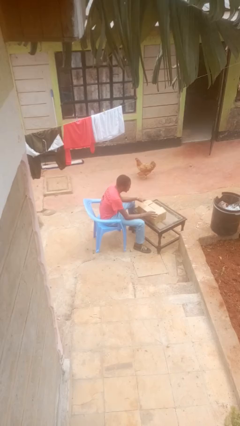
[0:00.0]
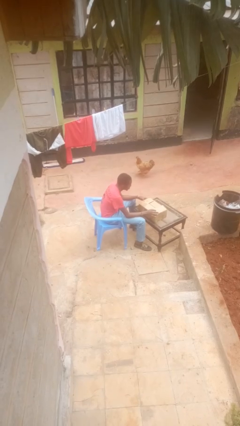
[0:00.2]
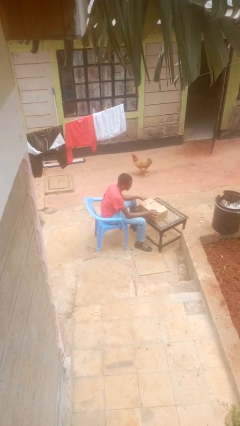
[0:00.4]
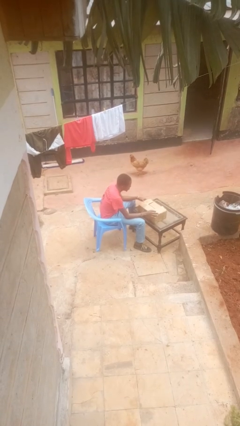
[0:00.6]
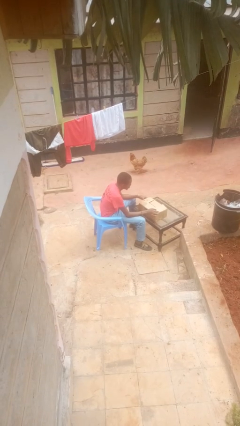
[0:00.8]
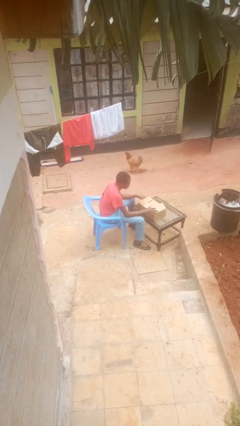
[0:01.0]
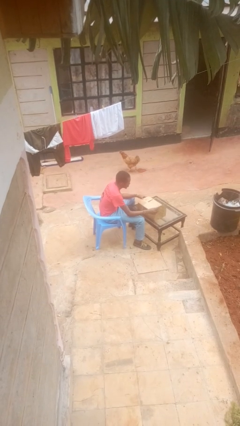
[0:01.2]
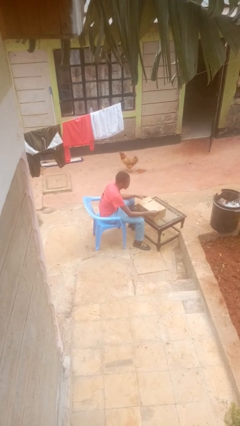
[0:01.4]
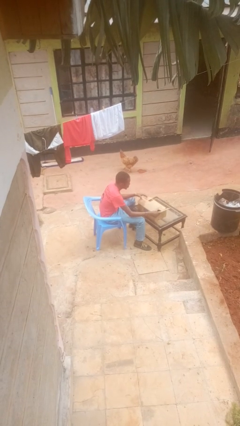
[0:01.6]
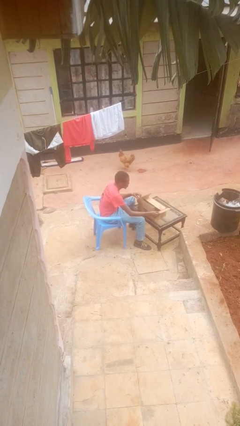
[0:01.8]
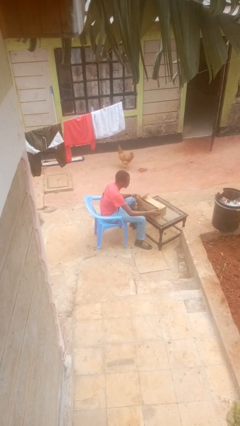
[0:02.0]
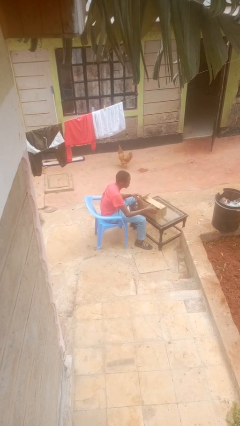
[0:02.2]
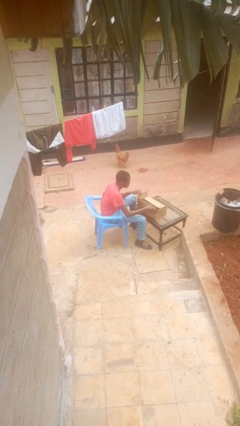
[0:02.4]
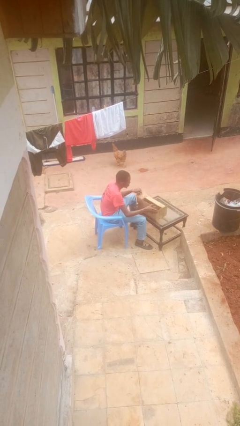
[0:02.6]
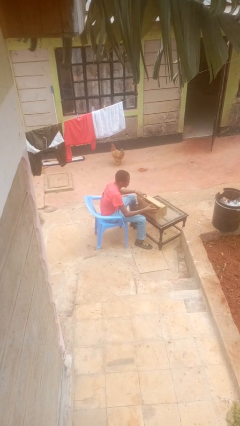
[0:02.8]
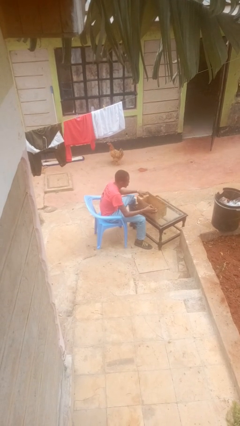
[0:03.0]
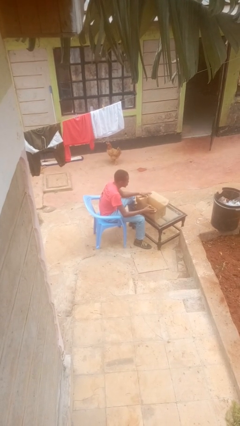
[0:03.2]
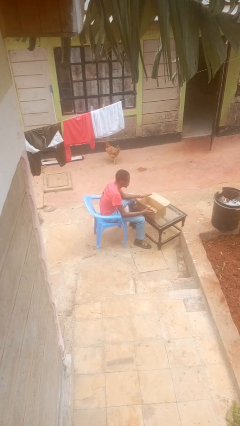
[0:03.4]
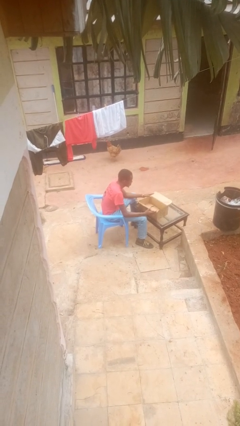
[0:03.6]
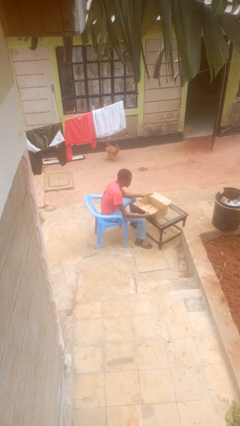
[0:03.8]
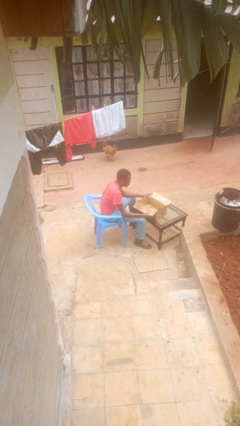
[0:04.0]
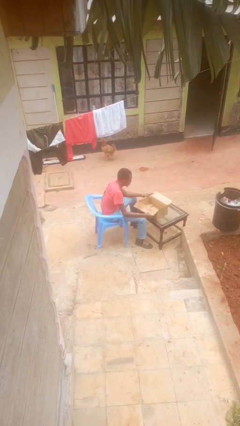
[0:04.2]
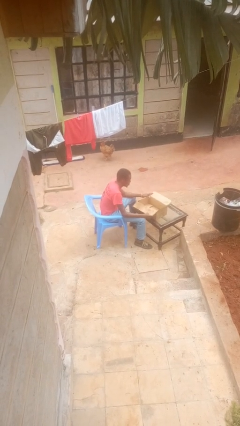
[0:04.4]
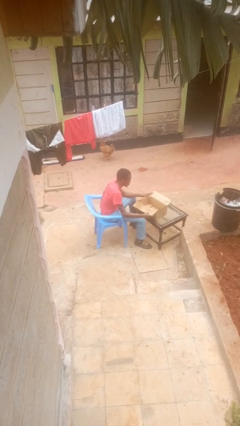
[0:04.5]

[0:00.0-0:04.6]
person opens box

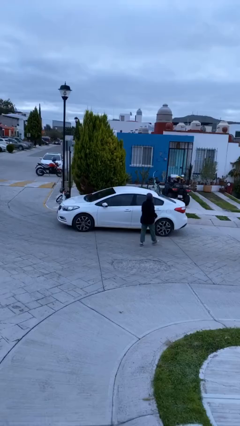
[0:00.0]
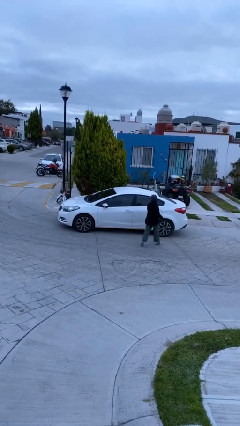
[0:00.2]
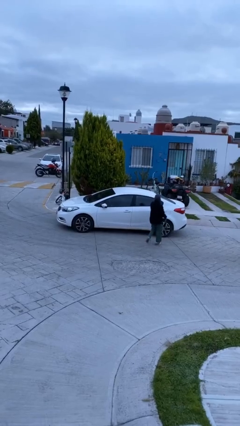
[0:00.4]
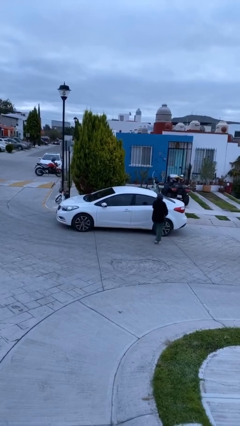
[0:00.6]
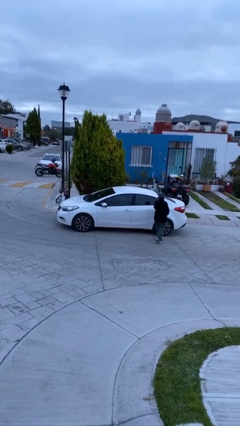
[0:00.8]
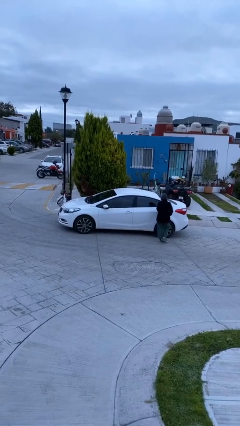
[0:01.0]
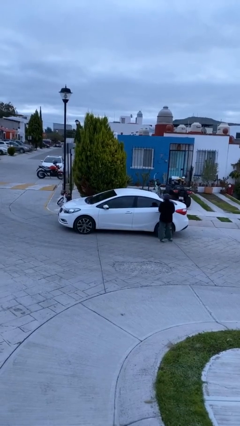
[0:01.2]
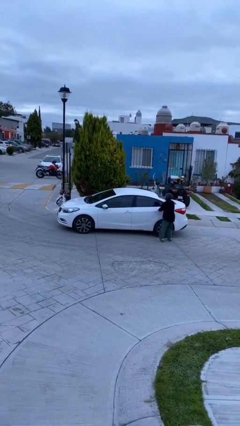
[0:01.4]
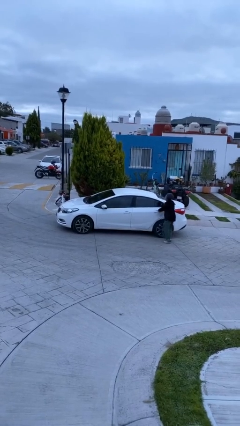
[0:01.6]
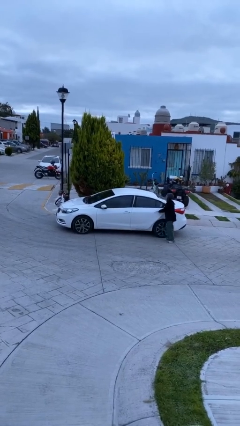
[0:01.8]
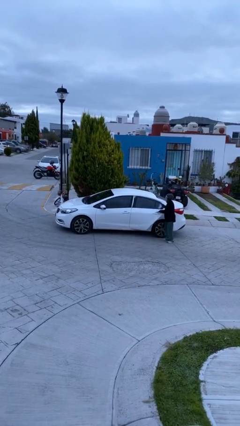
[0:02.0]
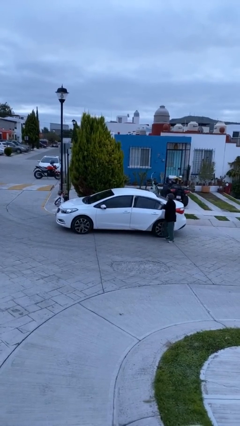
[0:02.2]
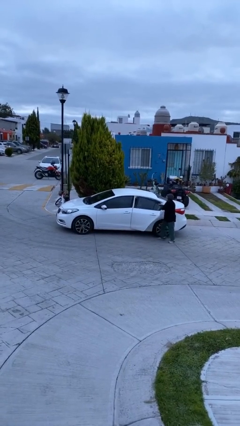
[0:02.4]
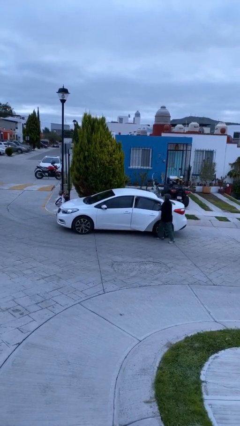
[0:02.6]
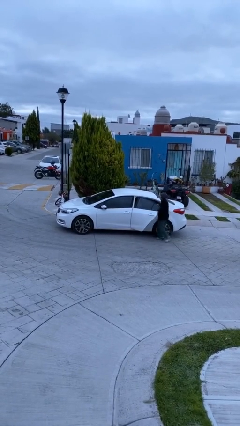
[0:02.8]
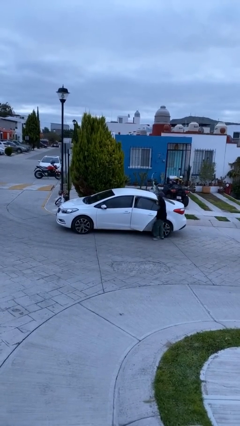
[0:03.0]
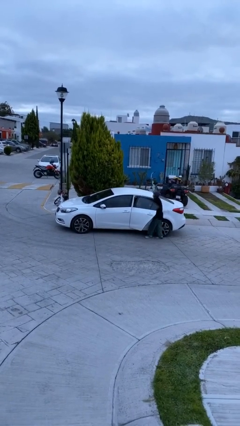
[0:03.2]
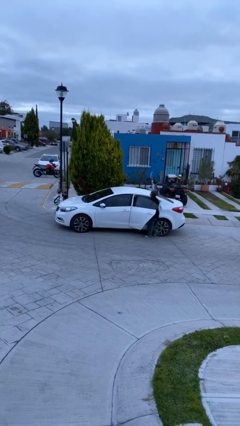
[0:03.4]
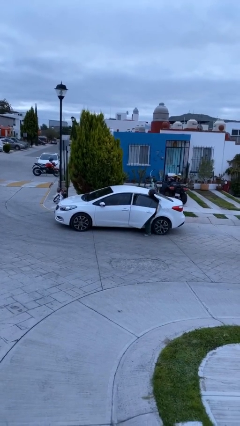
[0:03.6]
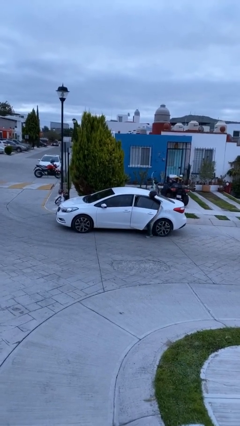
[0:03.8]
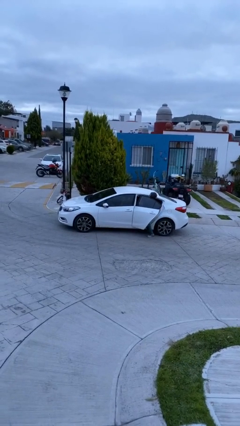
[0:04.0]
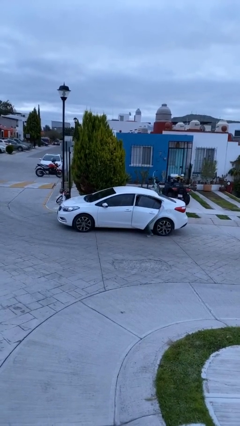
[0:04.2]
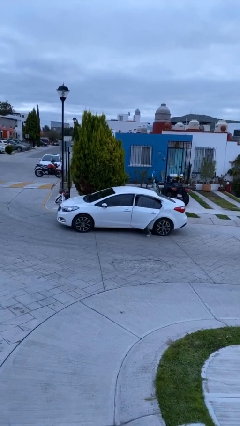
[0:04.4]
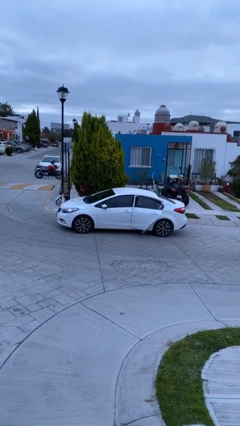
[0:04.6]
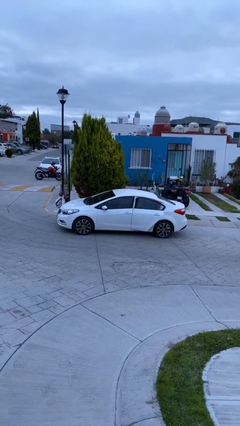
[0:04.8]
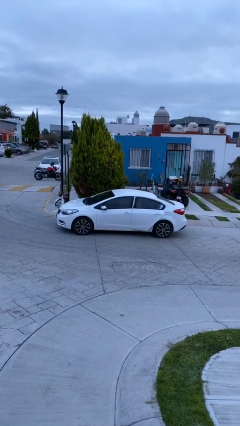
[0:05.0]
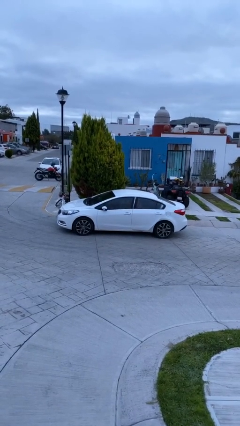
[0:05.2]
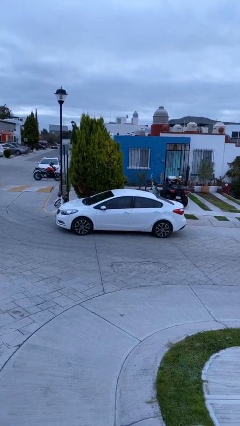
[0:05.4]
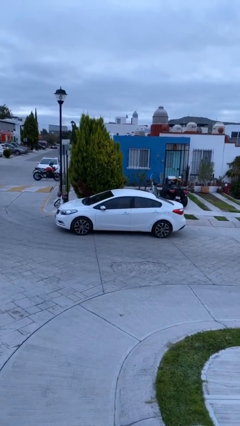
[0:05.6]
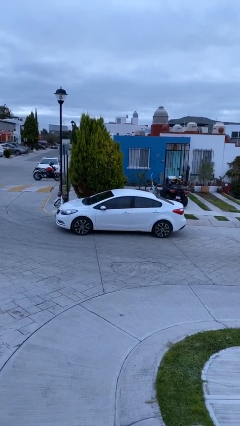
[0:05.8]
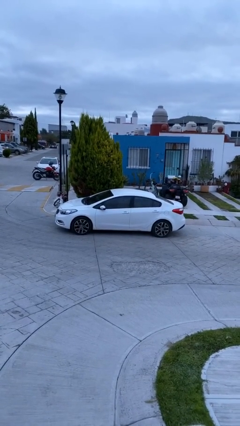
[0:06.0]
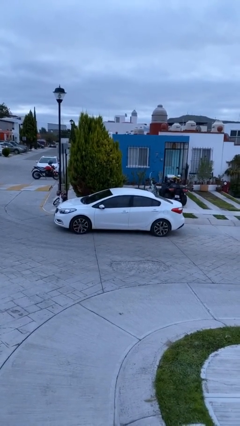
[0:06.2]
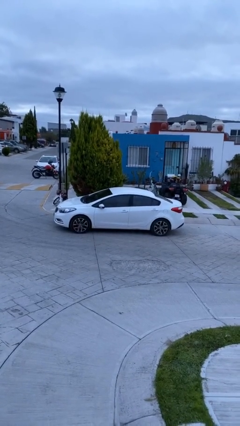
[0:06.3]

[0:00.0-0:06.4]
car picks up person

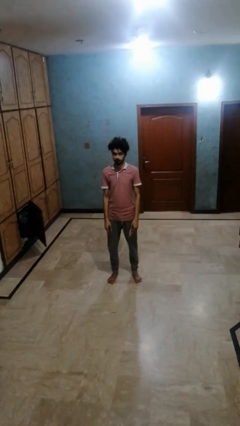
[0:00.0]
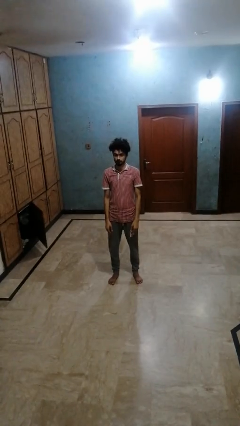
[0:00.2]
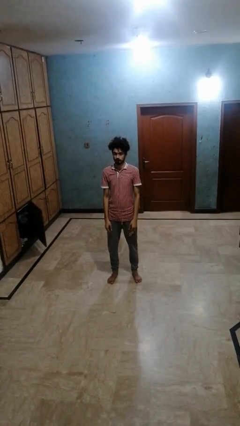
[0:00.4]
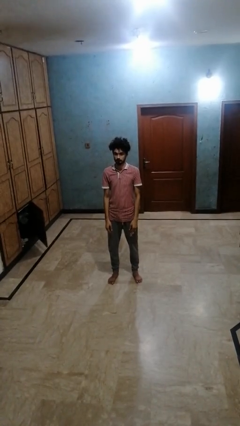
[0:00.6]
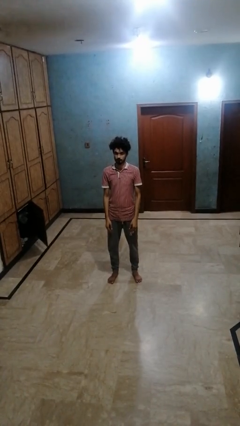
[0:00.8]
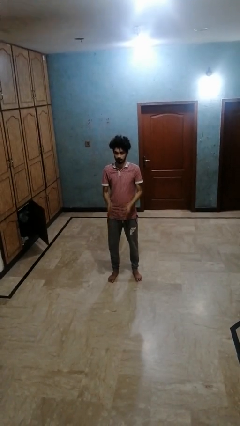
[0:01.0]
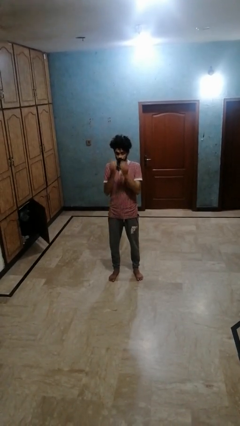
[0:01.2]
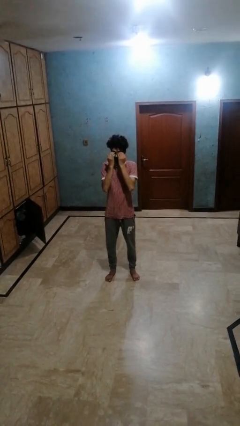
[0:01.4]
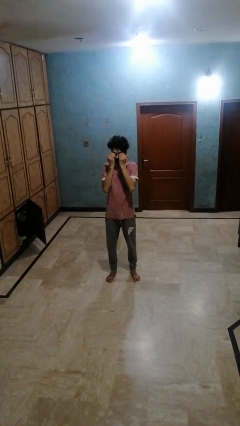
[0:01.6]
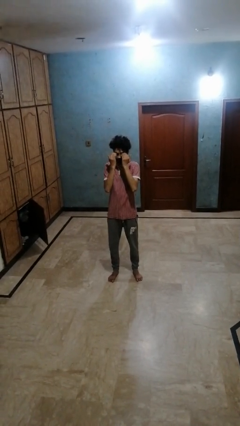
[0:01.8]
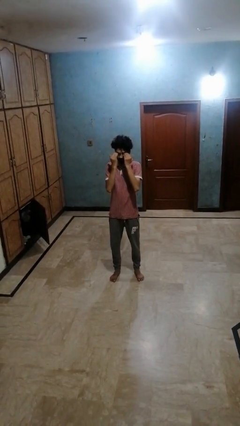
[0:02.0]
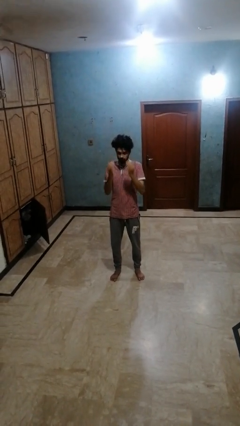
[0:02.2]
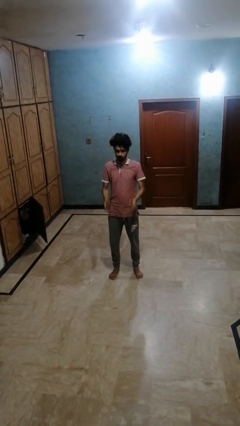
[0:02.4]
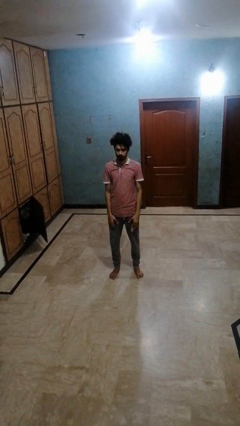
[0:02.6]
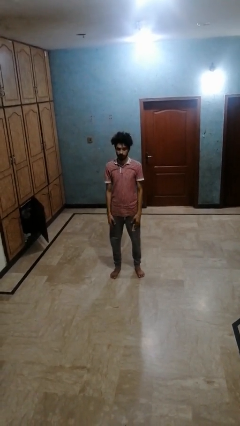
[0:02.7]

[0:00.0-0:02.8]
person rubs eyes

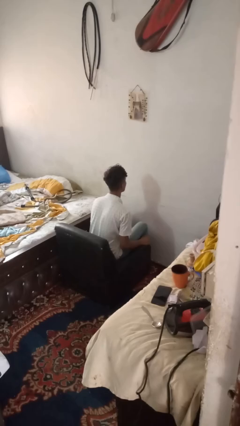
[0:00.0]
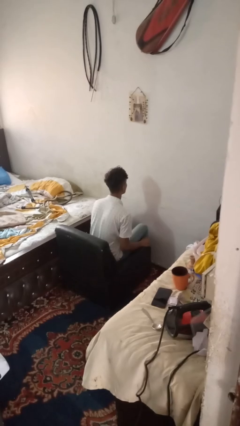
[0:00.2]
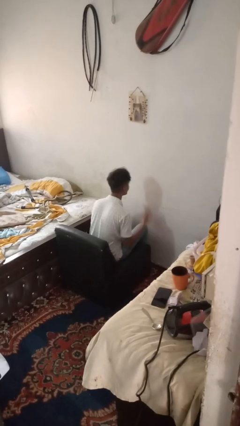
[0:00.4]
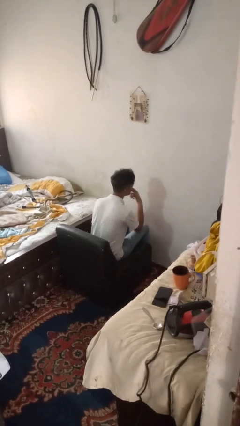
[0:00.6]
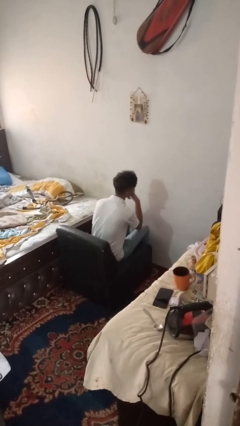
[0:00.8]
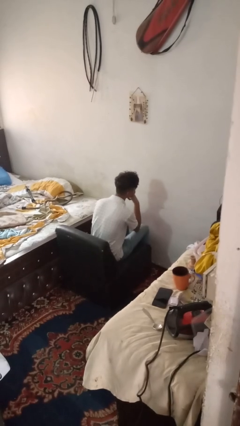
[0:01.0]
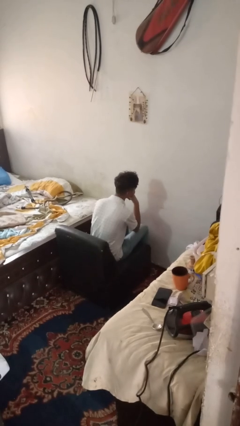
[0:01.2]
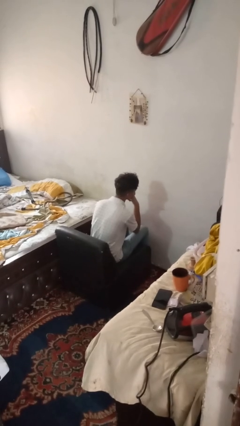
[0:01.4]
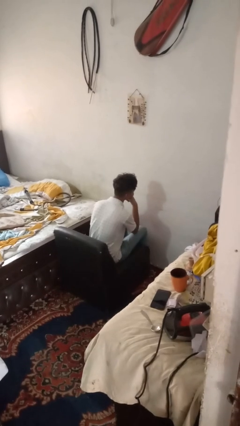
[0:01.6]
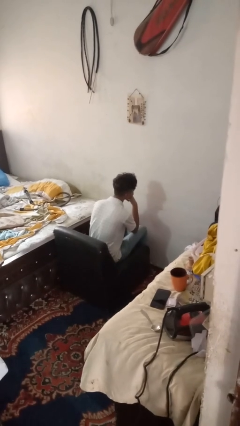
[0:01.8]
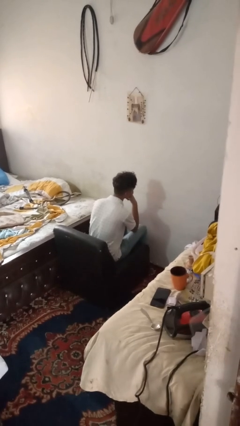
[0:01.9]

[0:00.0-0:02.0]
person strokes chin

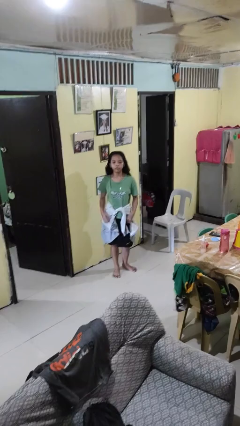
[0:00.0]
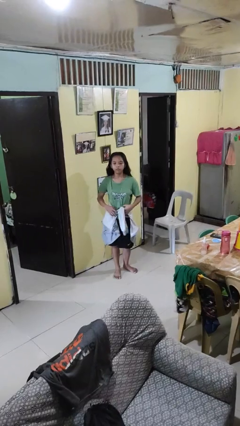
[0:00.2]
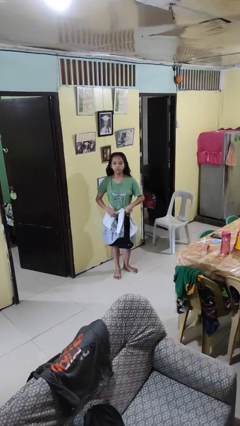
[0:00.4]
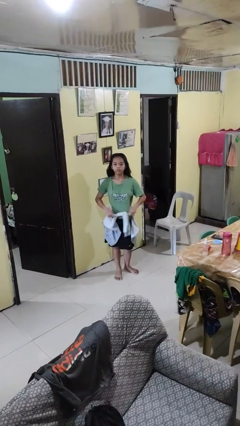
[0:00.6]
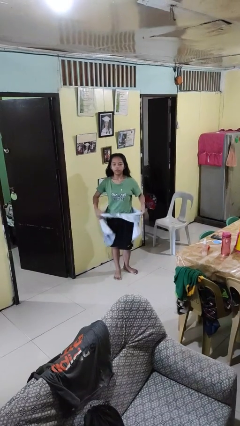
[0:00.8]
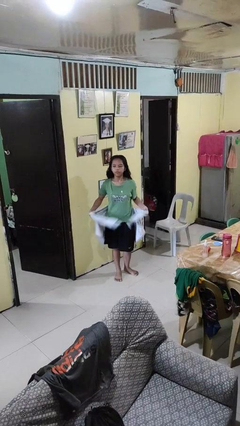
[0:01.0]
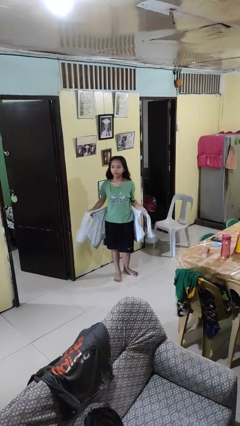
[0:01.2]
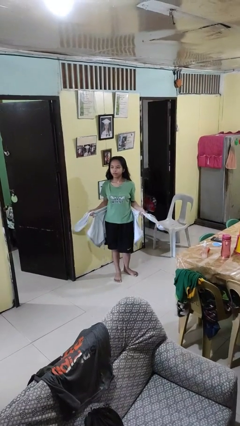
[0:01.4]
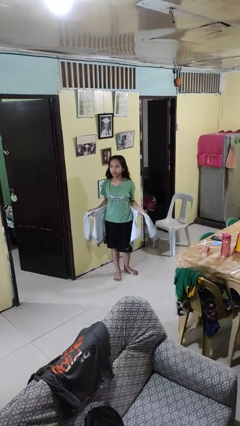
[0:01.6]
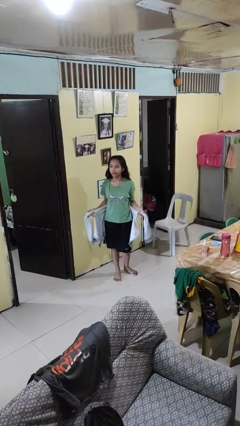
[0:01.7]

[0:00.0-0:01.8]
person unties jacket around waist
